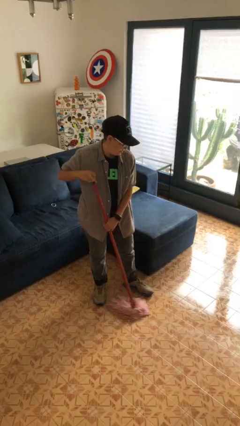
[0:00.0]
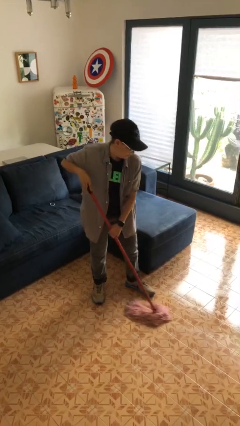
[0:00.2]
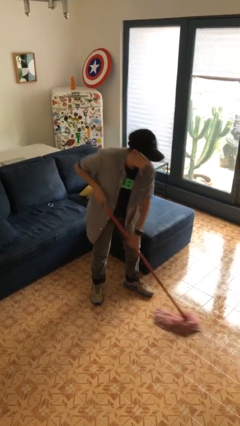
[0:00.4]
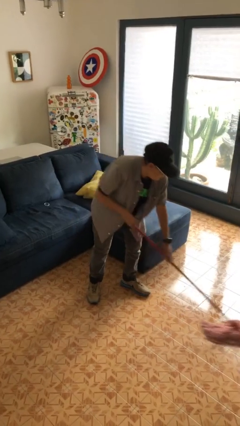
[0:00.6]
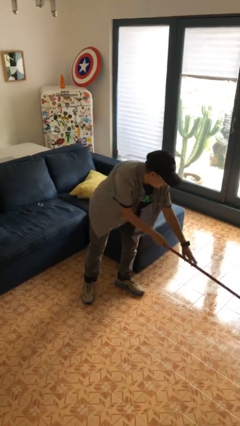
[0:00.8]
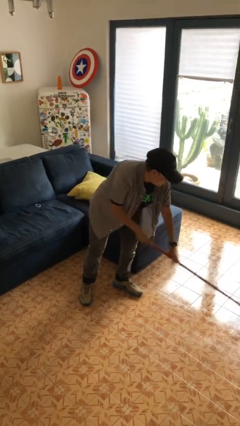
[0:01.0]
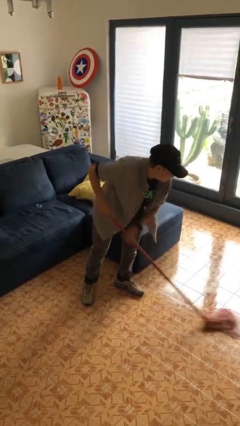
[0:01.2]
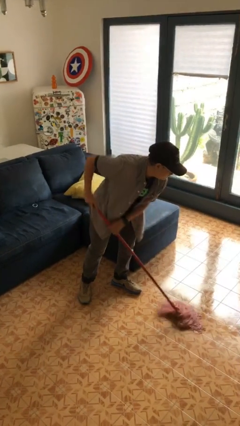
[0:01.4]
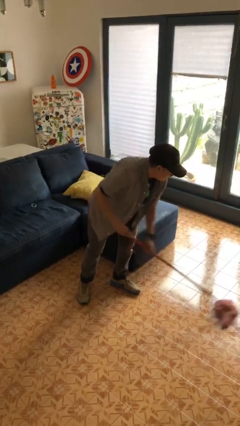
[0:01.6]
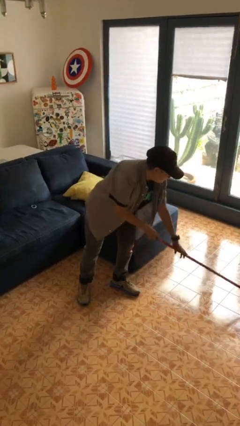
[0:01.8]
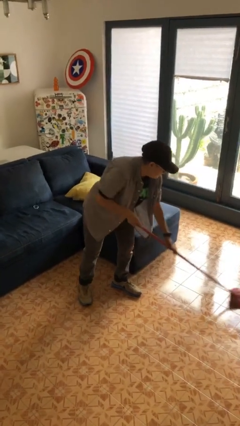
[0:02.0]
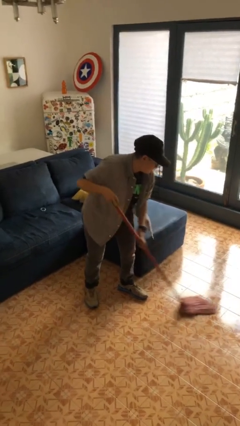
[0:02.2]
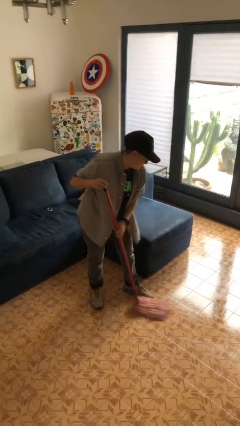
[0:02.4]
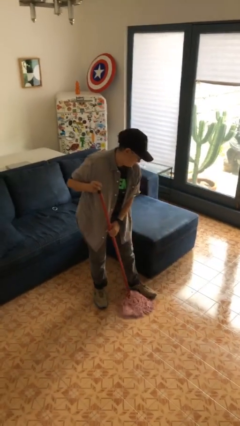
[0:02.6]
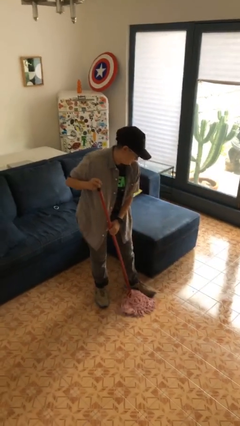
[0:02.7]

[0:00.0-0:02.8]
person mops

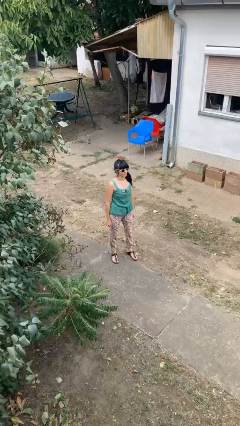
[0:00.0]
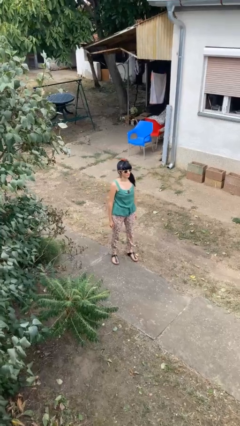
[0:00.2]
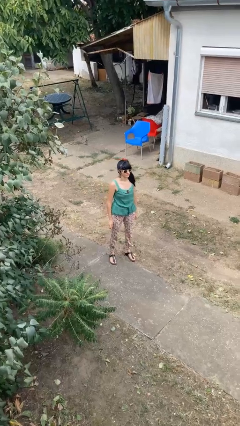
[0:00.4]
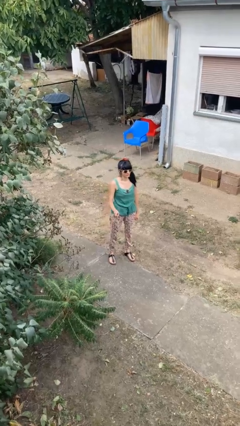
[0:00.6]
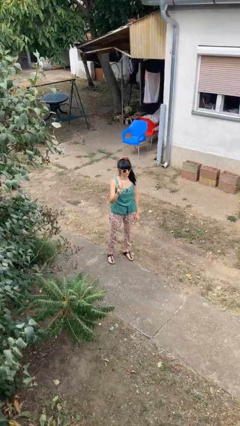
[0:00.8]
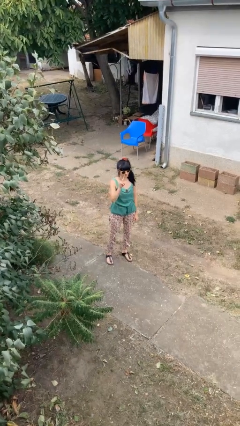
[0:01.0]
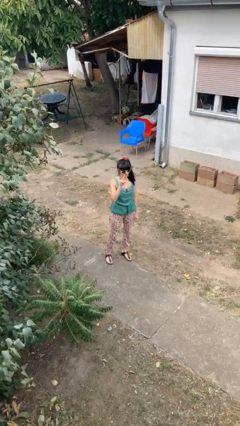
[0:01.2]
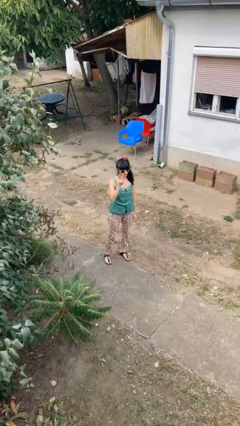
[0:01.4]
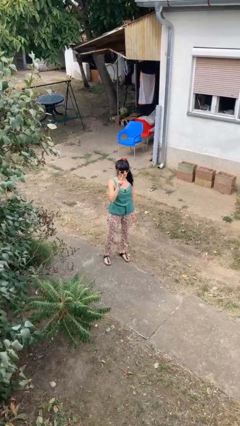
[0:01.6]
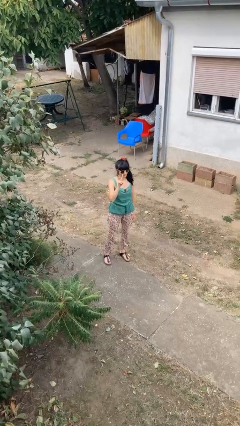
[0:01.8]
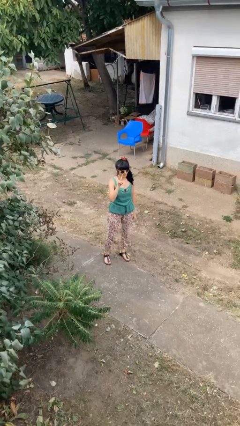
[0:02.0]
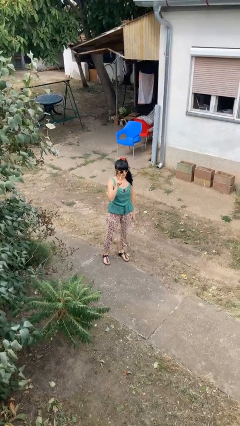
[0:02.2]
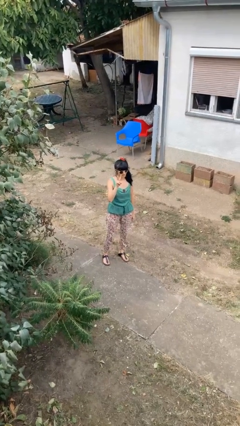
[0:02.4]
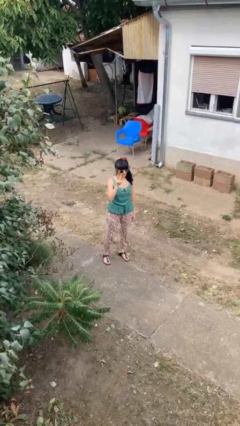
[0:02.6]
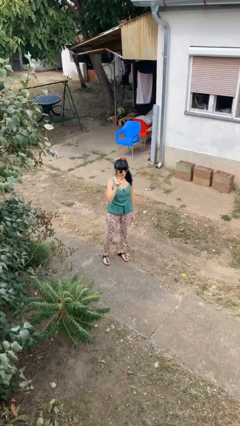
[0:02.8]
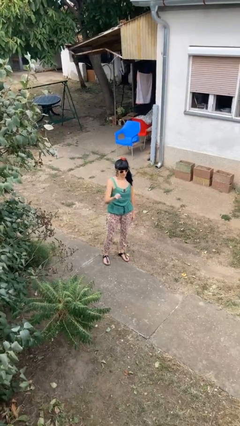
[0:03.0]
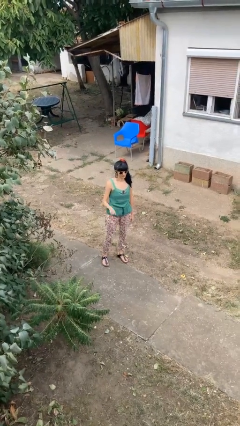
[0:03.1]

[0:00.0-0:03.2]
person gestures peace

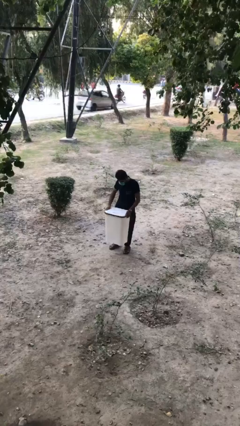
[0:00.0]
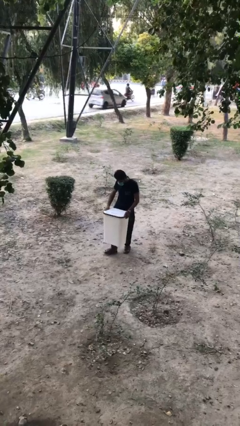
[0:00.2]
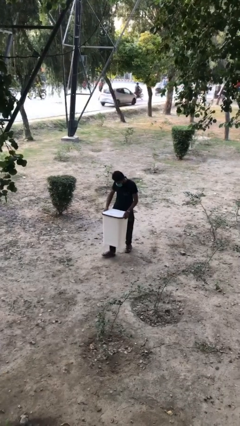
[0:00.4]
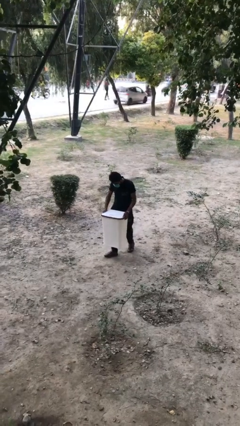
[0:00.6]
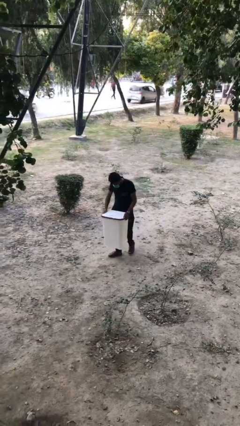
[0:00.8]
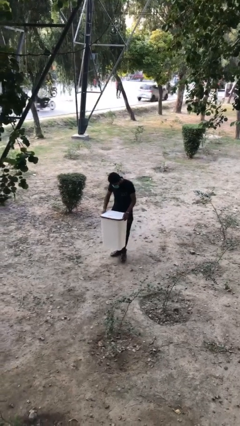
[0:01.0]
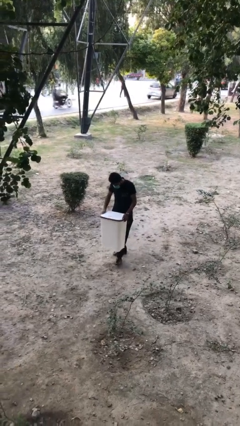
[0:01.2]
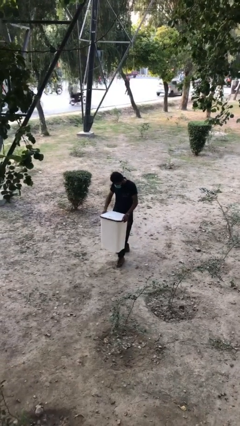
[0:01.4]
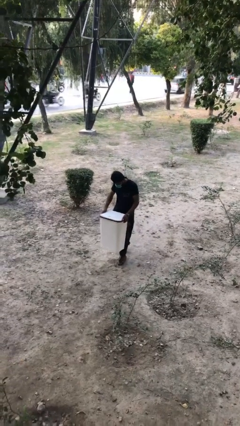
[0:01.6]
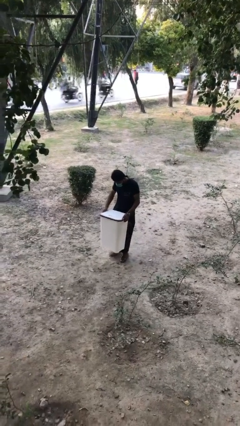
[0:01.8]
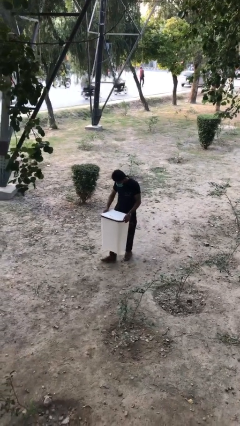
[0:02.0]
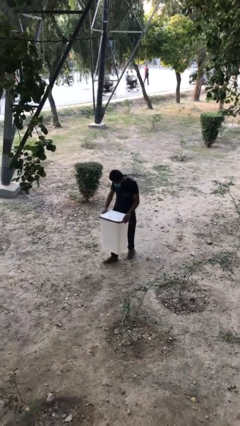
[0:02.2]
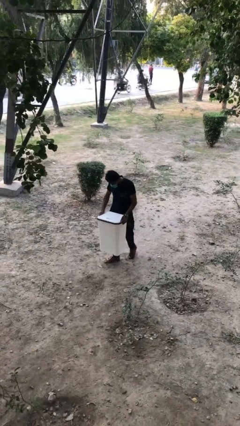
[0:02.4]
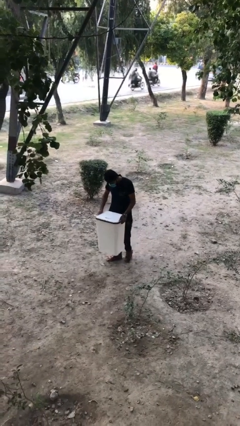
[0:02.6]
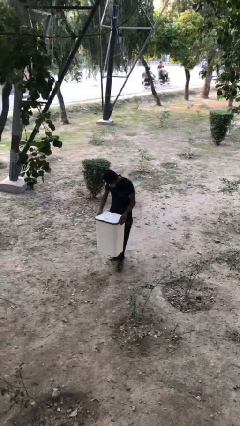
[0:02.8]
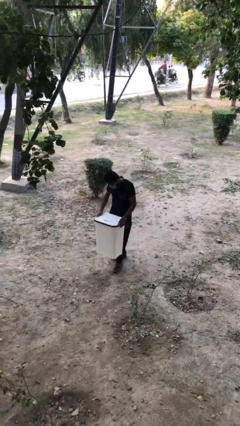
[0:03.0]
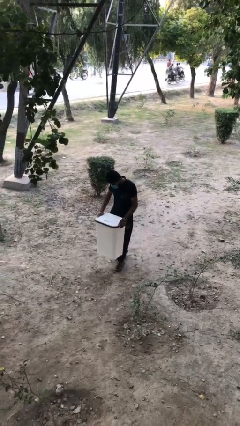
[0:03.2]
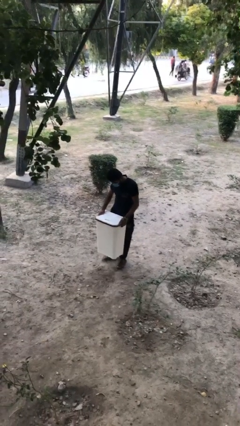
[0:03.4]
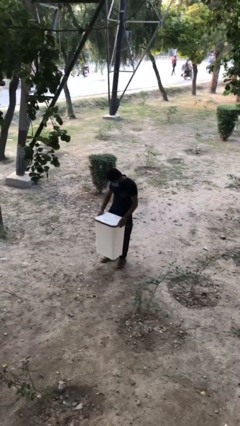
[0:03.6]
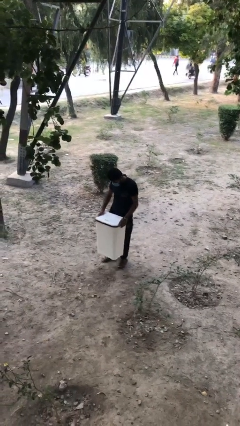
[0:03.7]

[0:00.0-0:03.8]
person carries heavy object

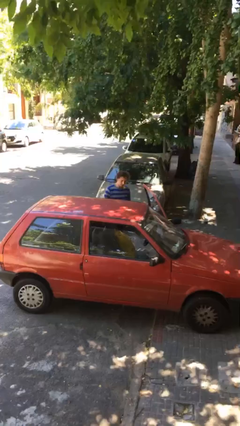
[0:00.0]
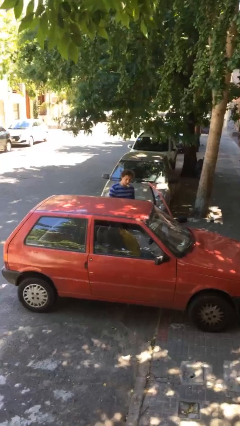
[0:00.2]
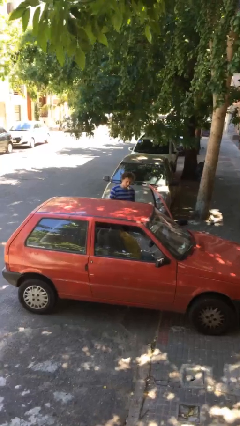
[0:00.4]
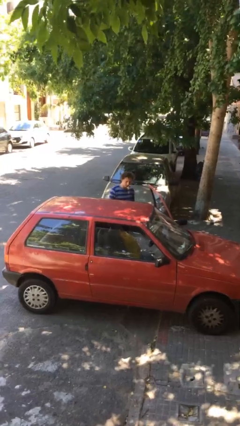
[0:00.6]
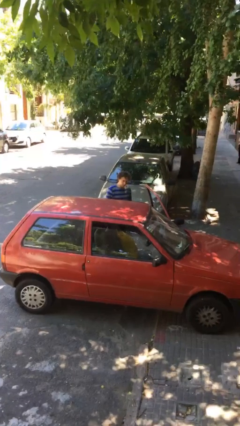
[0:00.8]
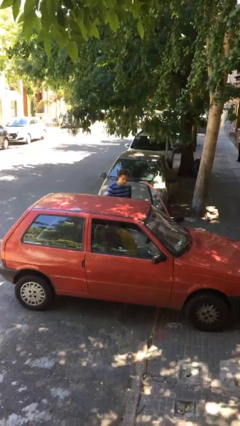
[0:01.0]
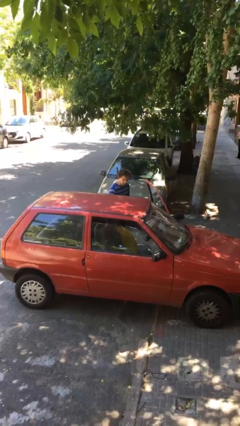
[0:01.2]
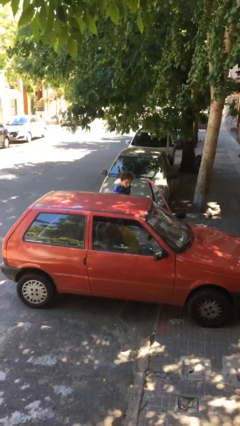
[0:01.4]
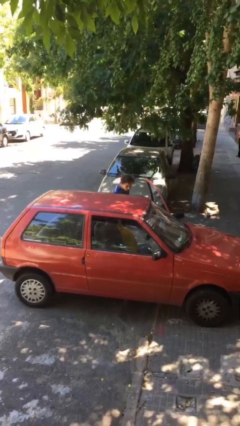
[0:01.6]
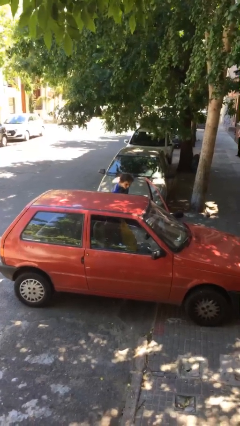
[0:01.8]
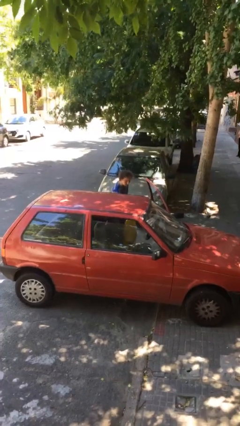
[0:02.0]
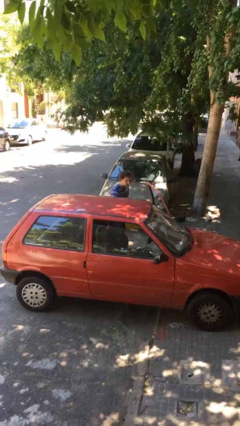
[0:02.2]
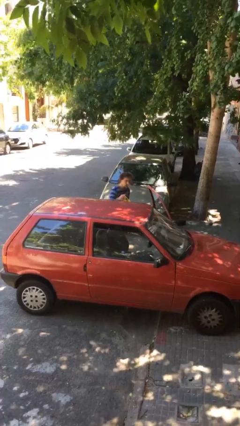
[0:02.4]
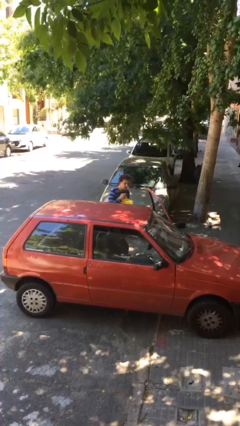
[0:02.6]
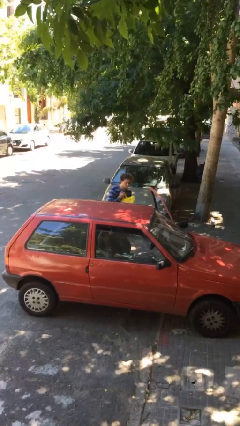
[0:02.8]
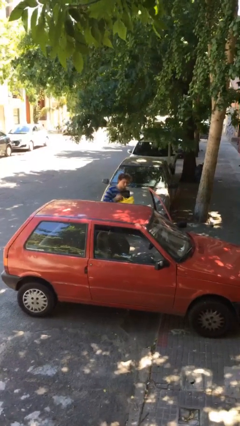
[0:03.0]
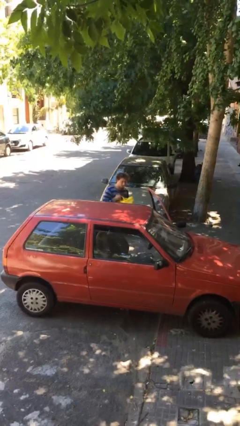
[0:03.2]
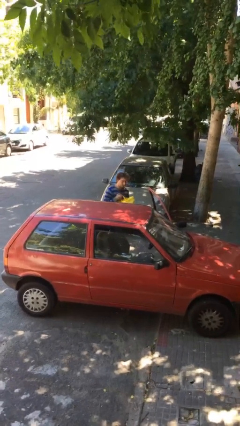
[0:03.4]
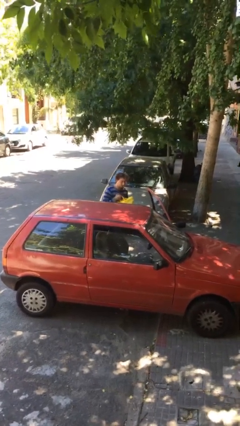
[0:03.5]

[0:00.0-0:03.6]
person unloads car

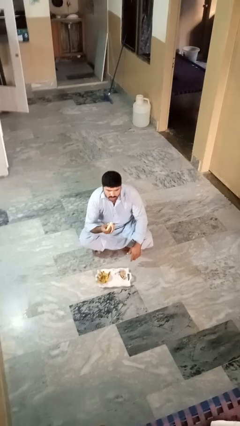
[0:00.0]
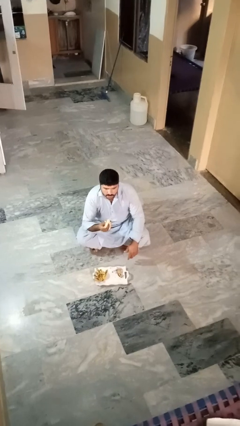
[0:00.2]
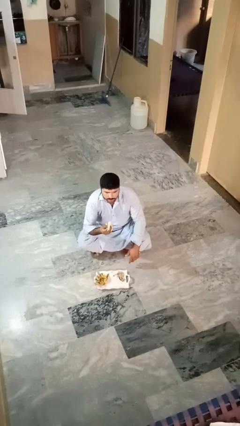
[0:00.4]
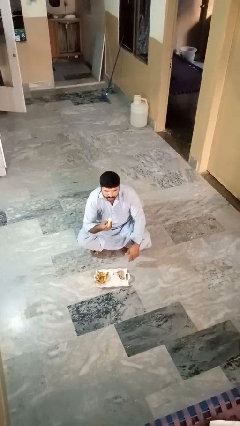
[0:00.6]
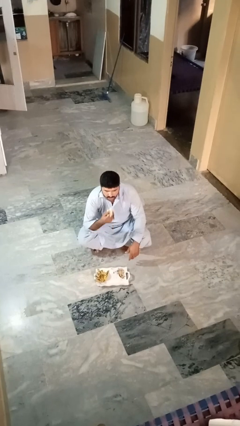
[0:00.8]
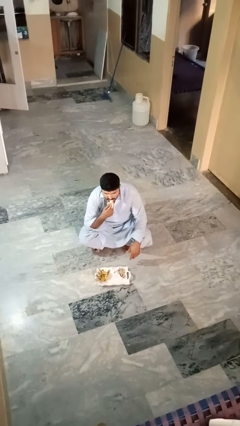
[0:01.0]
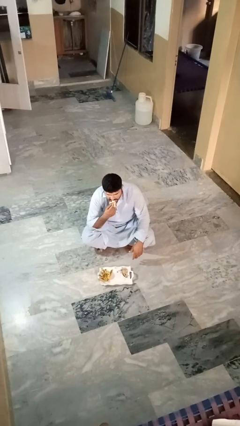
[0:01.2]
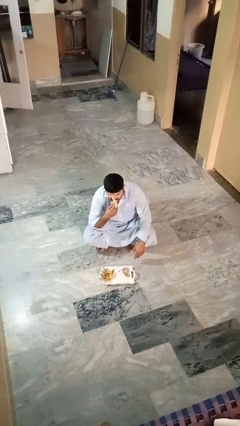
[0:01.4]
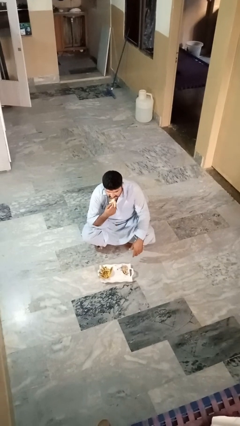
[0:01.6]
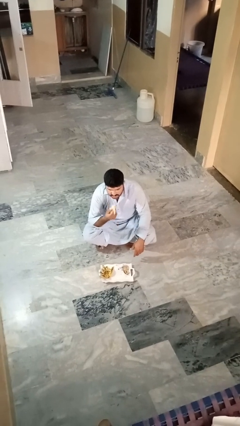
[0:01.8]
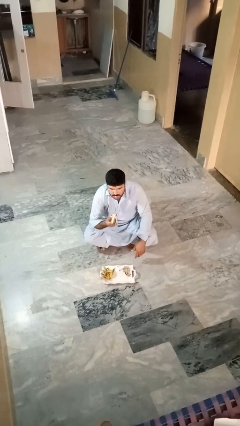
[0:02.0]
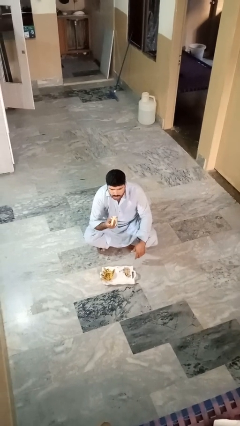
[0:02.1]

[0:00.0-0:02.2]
person eats banana

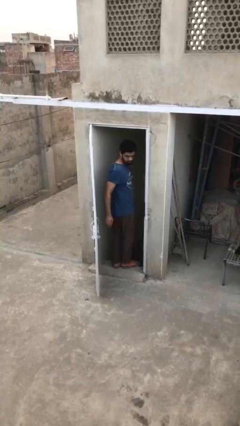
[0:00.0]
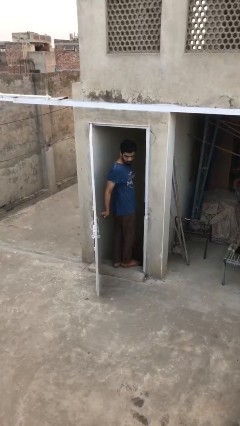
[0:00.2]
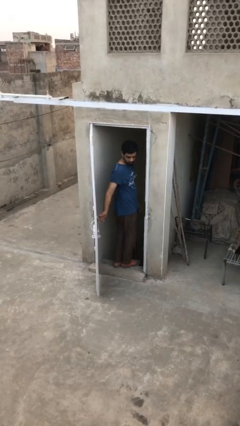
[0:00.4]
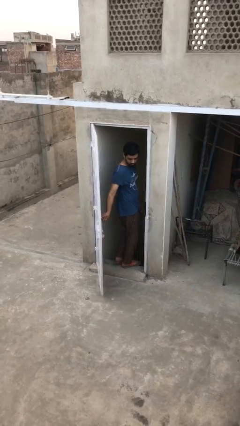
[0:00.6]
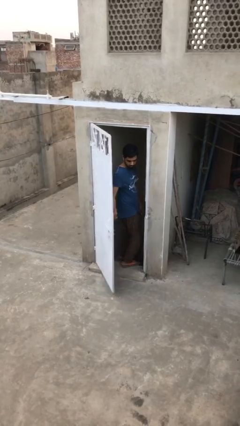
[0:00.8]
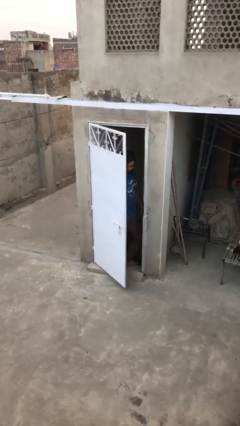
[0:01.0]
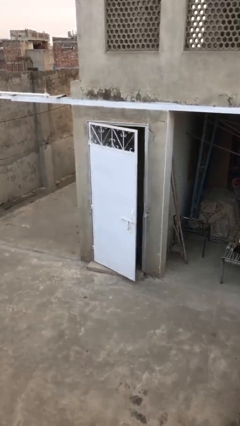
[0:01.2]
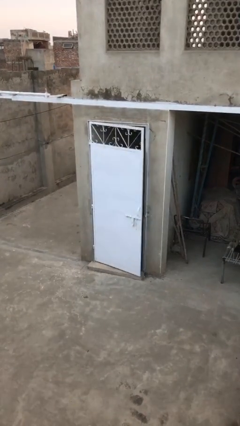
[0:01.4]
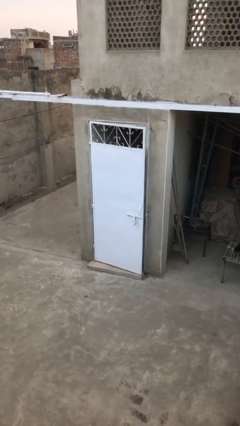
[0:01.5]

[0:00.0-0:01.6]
person closes facility door

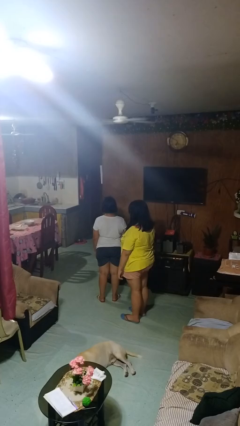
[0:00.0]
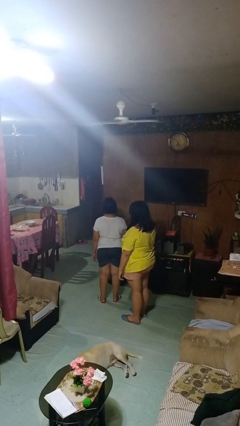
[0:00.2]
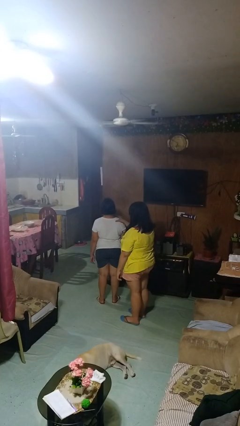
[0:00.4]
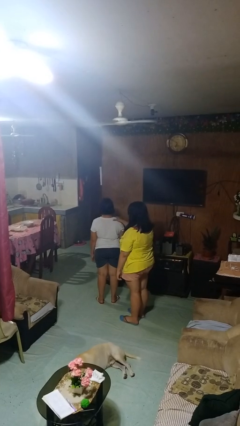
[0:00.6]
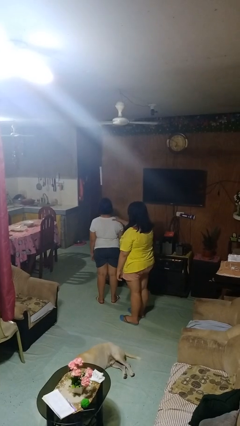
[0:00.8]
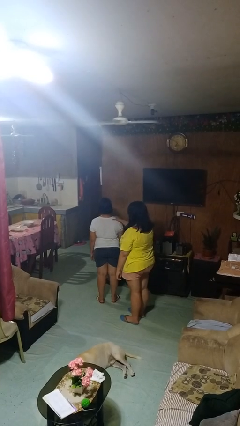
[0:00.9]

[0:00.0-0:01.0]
person grabs person by shoulder
